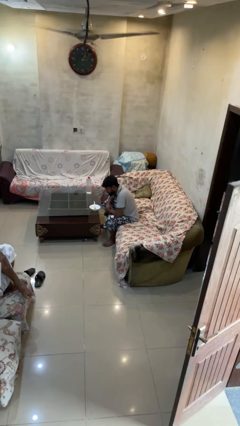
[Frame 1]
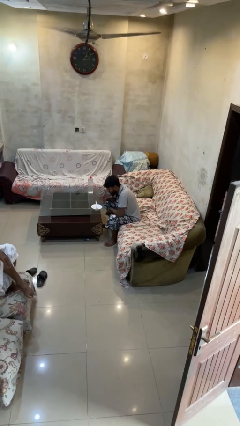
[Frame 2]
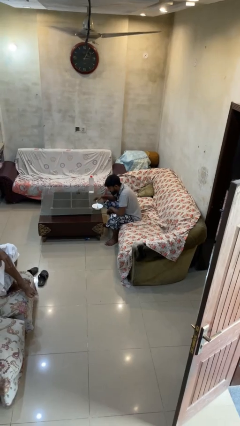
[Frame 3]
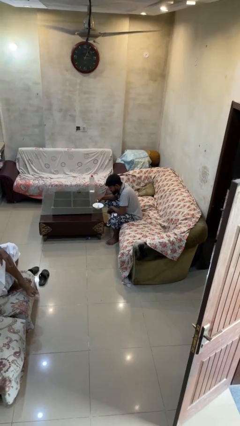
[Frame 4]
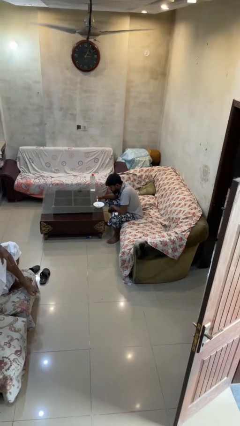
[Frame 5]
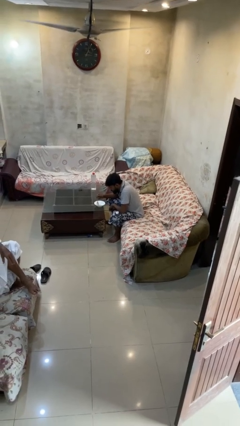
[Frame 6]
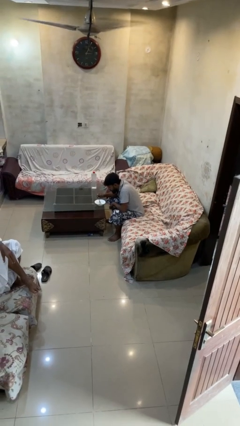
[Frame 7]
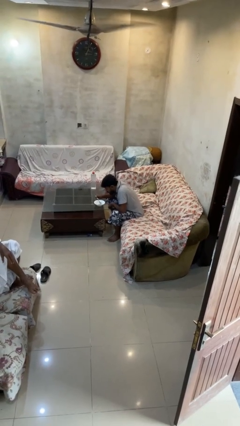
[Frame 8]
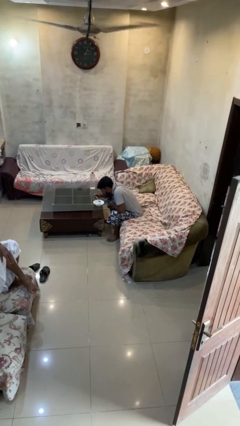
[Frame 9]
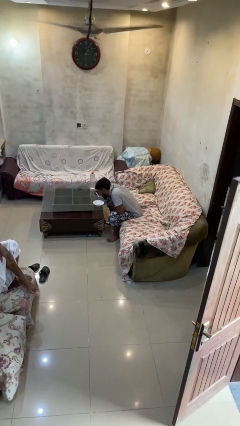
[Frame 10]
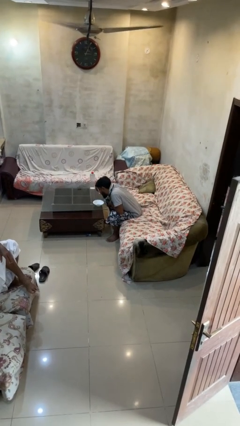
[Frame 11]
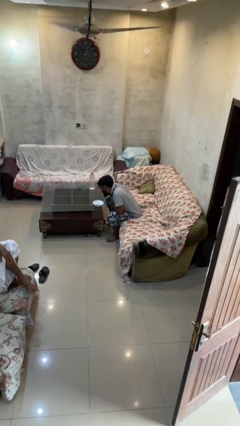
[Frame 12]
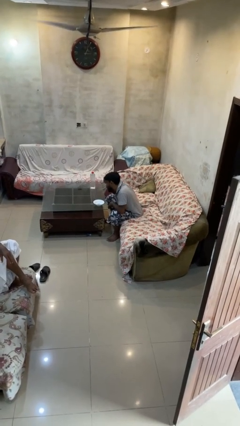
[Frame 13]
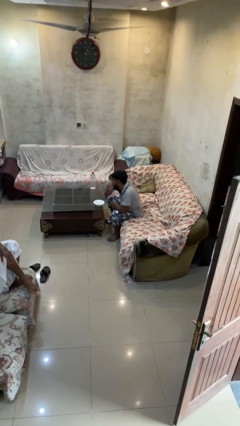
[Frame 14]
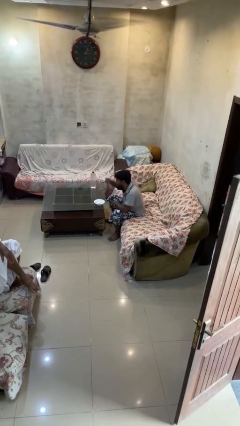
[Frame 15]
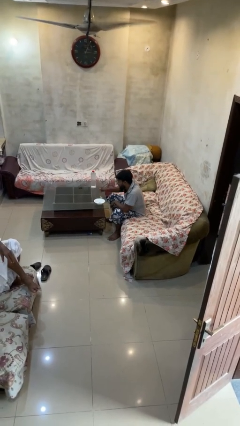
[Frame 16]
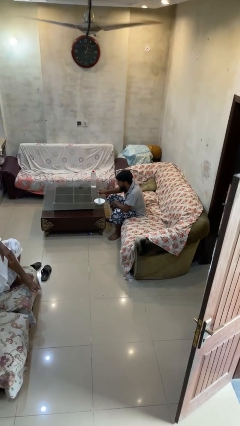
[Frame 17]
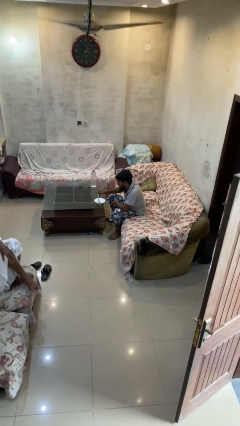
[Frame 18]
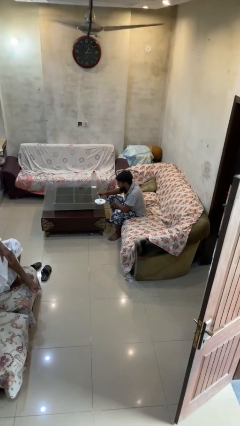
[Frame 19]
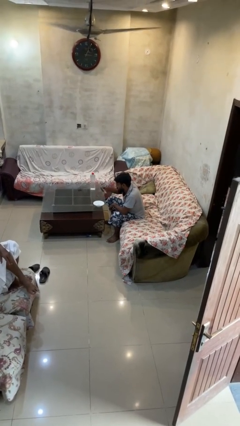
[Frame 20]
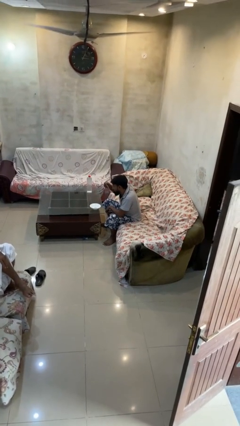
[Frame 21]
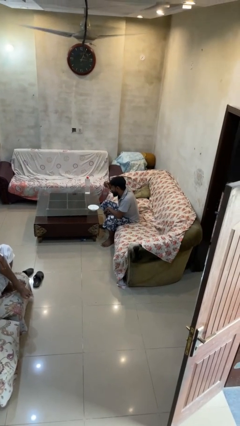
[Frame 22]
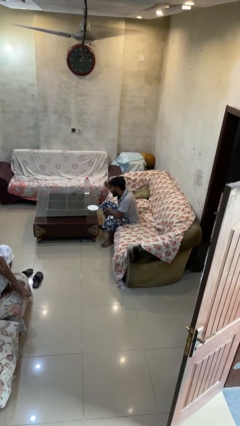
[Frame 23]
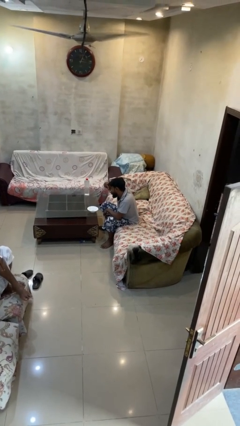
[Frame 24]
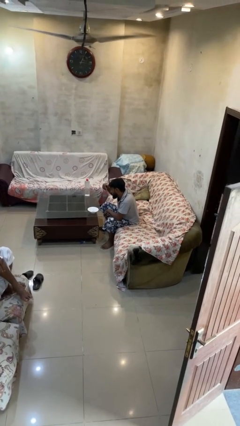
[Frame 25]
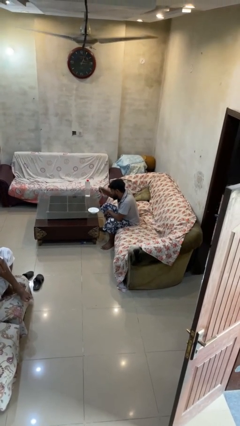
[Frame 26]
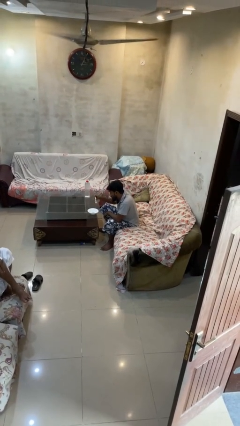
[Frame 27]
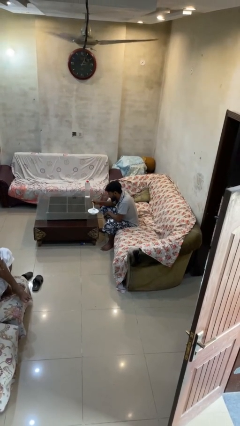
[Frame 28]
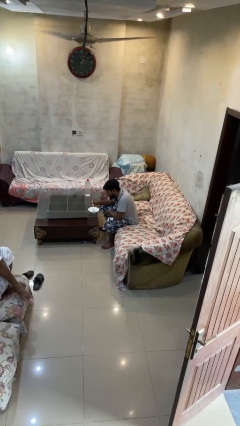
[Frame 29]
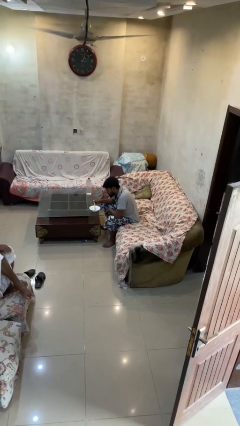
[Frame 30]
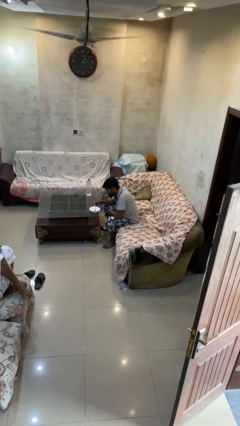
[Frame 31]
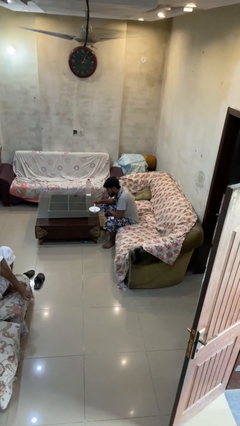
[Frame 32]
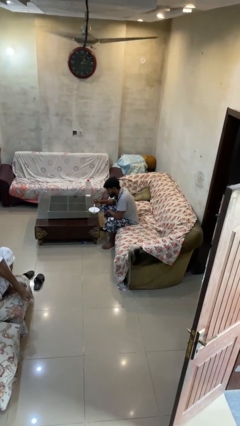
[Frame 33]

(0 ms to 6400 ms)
person eats with utensil

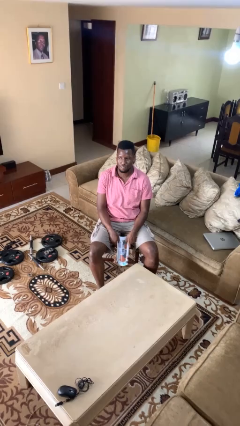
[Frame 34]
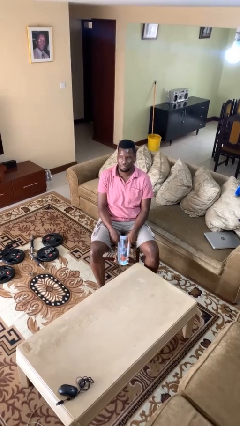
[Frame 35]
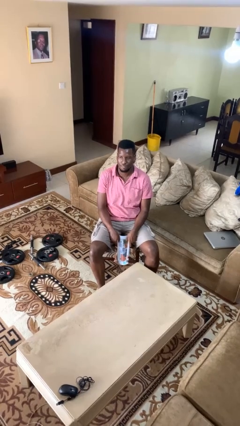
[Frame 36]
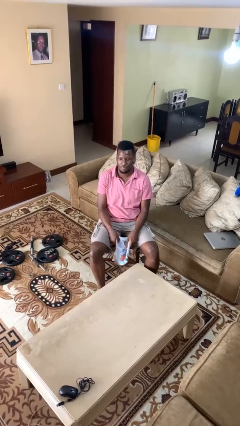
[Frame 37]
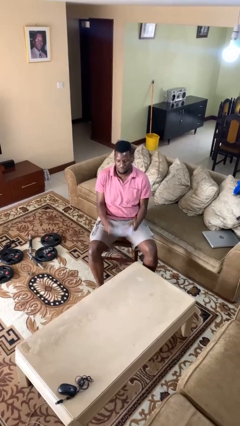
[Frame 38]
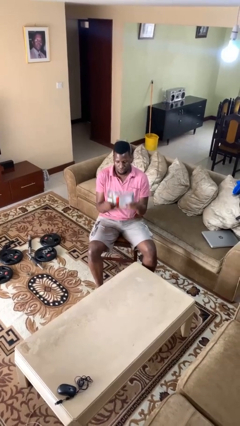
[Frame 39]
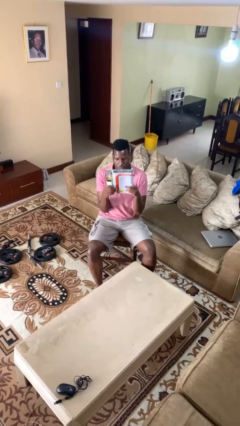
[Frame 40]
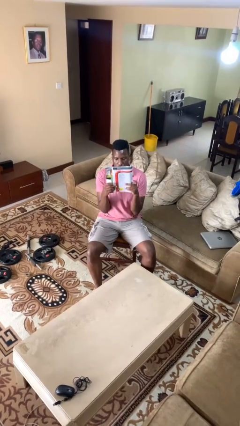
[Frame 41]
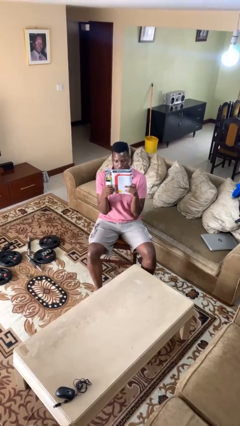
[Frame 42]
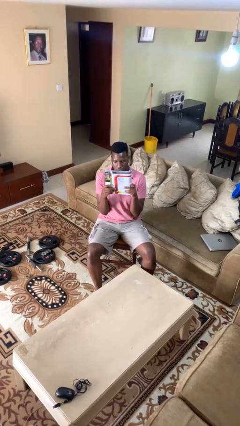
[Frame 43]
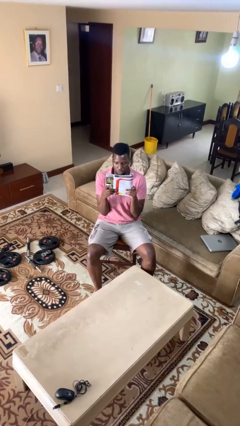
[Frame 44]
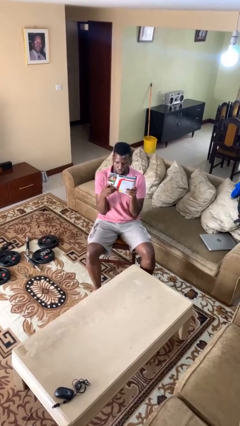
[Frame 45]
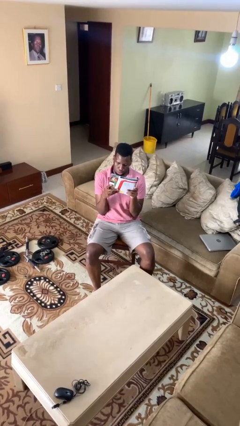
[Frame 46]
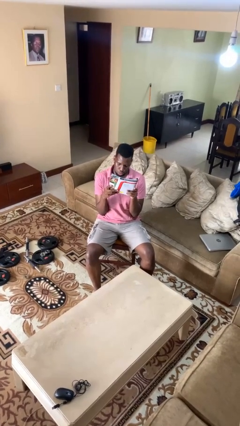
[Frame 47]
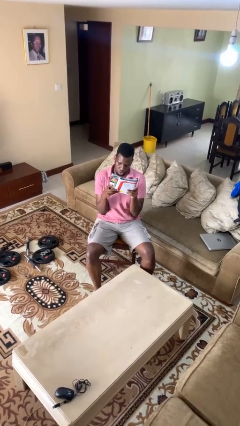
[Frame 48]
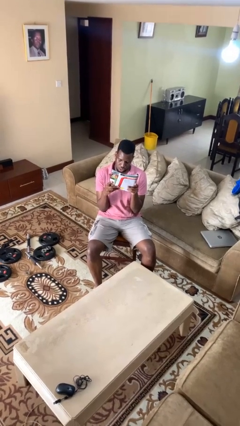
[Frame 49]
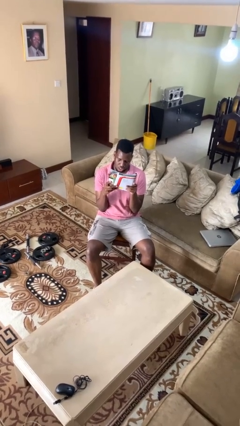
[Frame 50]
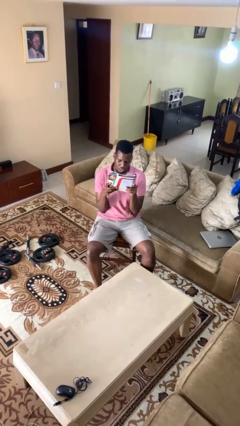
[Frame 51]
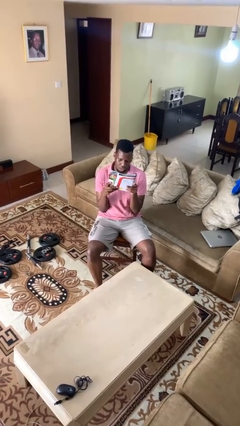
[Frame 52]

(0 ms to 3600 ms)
person reads document

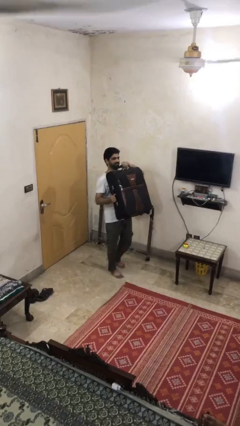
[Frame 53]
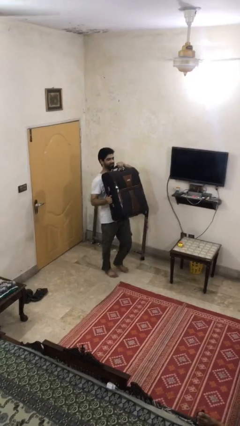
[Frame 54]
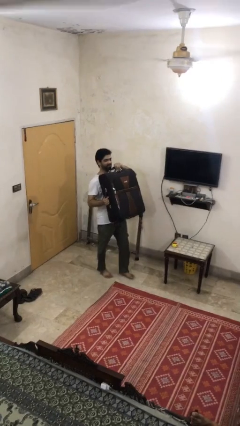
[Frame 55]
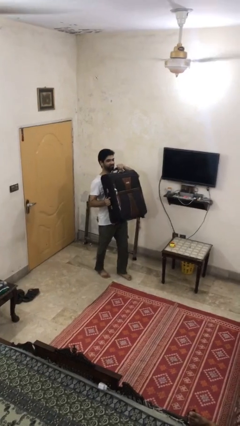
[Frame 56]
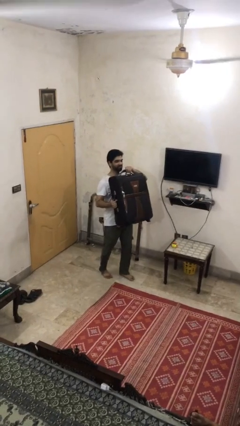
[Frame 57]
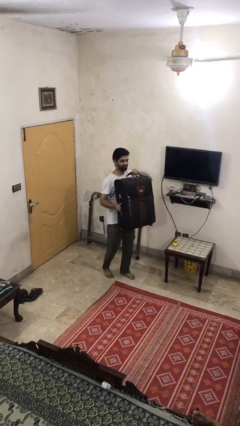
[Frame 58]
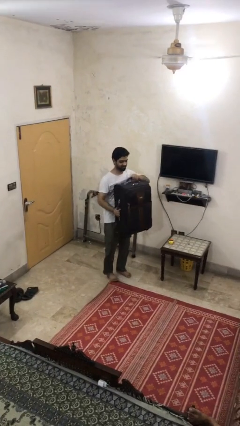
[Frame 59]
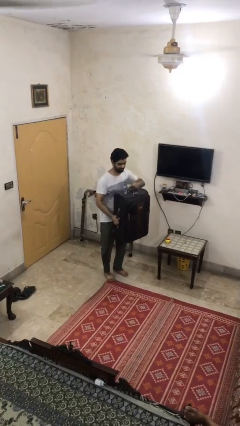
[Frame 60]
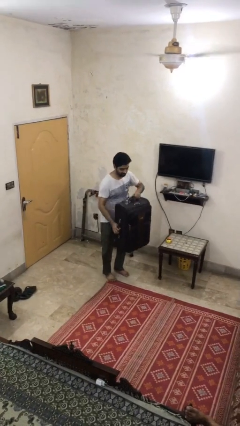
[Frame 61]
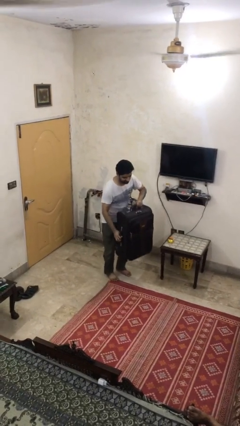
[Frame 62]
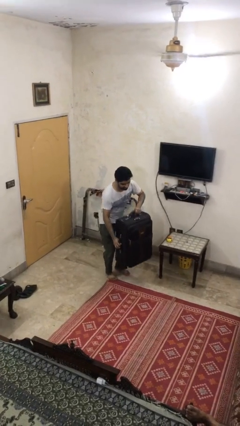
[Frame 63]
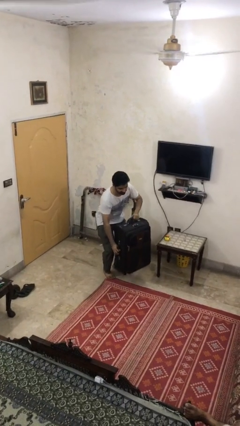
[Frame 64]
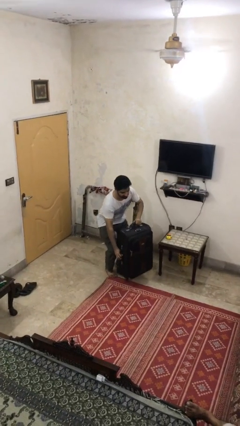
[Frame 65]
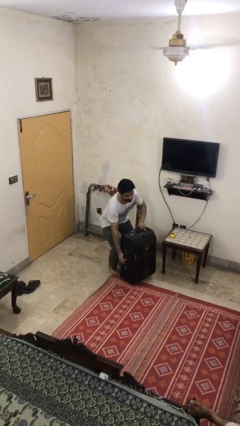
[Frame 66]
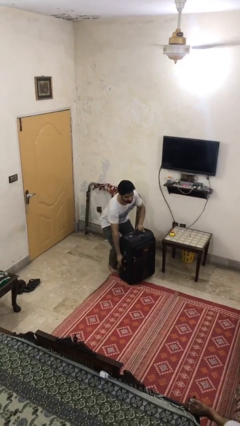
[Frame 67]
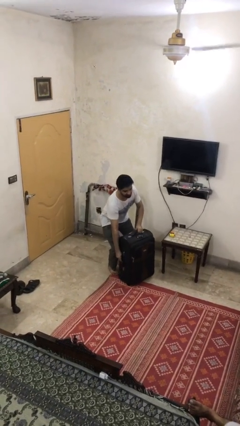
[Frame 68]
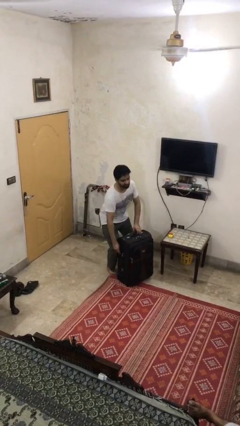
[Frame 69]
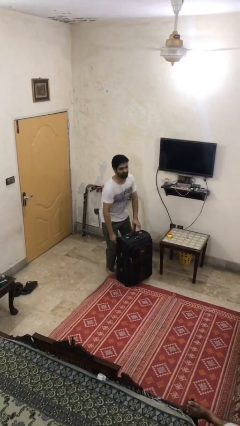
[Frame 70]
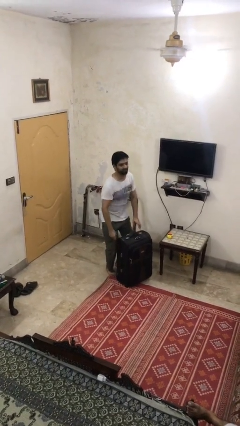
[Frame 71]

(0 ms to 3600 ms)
person puts down object on floor

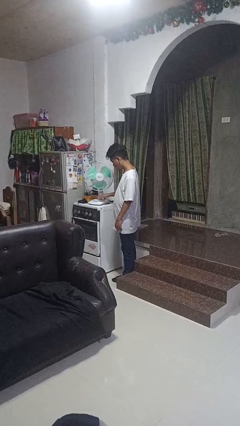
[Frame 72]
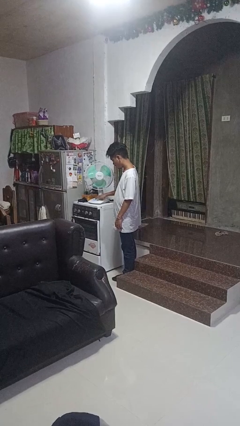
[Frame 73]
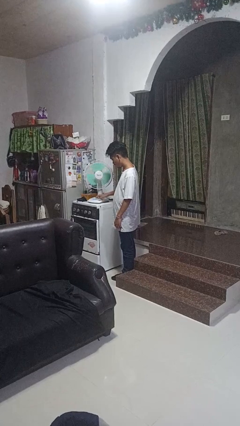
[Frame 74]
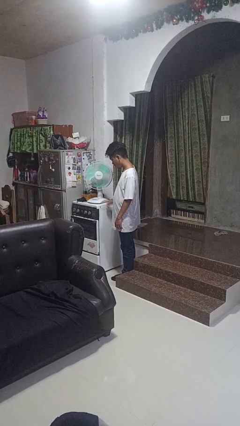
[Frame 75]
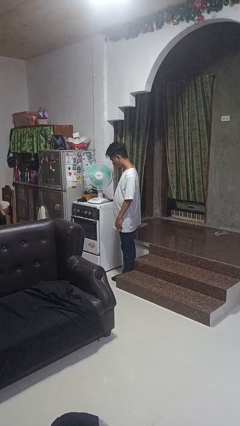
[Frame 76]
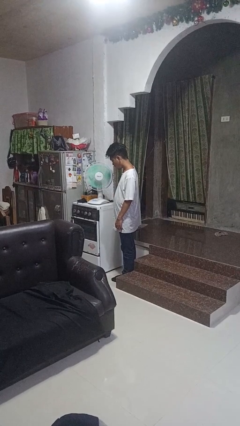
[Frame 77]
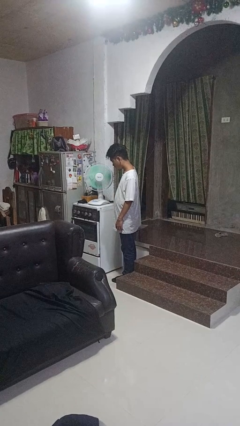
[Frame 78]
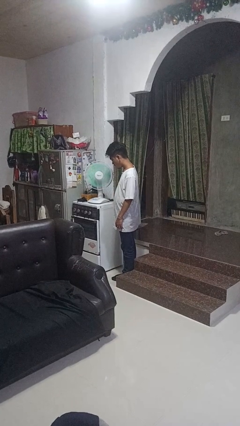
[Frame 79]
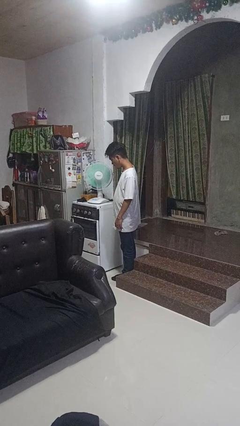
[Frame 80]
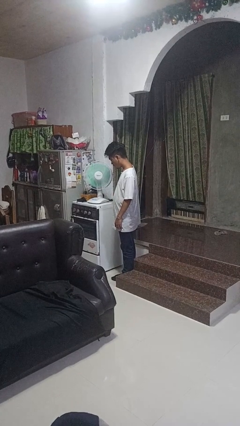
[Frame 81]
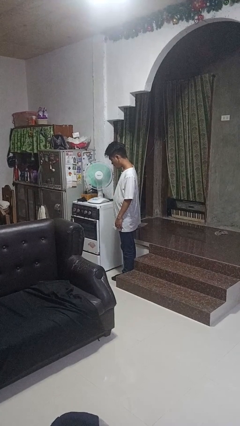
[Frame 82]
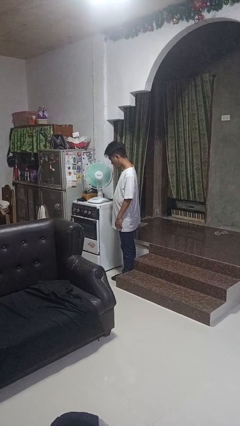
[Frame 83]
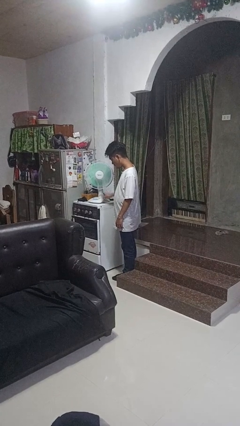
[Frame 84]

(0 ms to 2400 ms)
person turns on fan

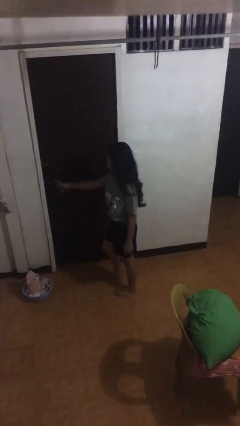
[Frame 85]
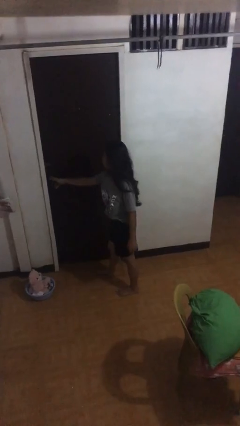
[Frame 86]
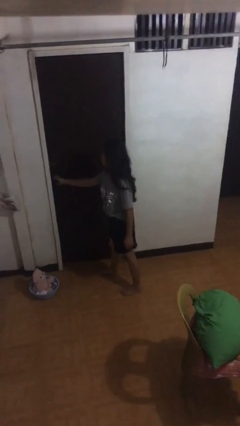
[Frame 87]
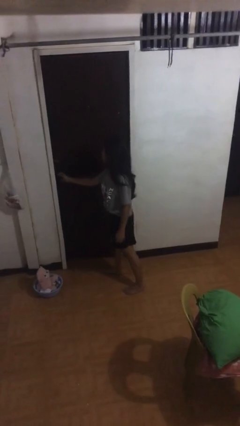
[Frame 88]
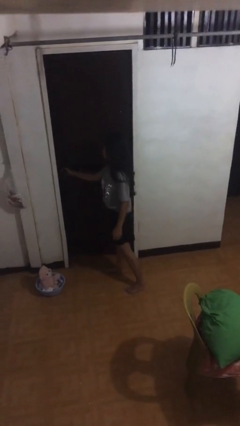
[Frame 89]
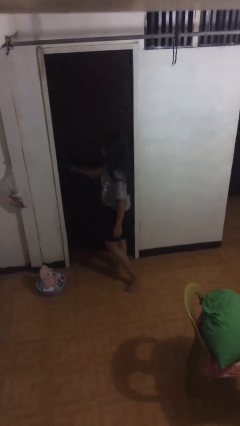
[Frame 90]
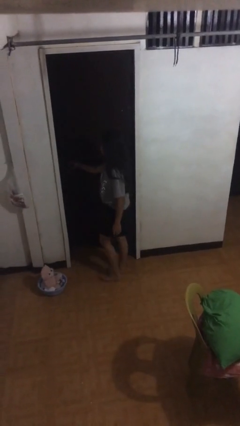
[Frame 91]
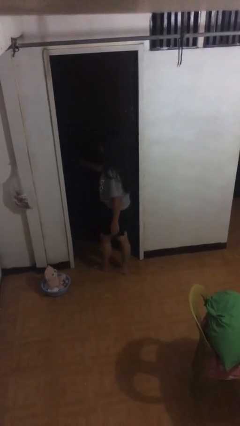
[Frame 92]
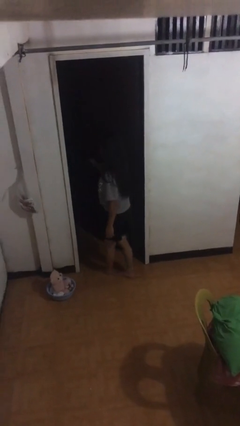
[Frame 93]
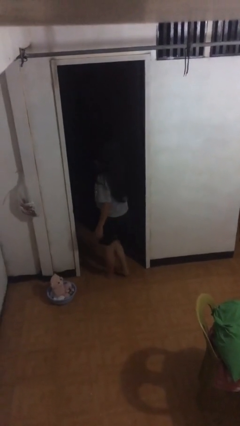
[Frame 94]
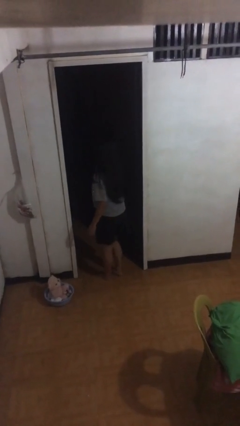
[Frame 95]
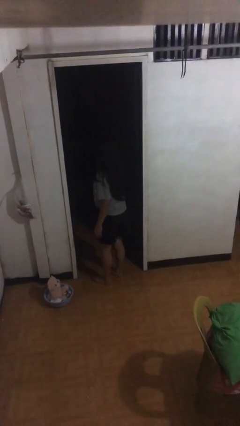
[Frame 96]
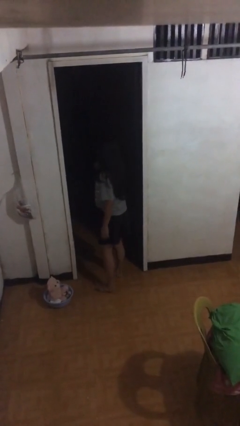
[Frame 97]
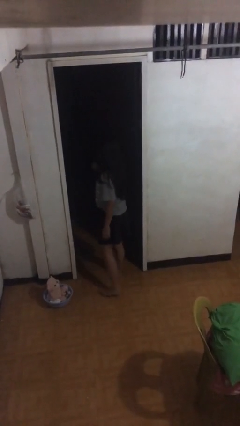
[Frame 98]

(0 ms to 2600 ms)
person opens facility door
